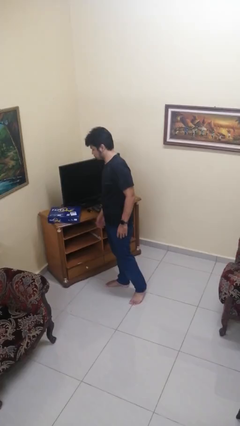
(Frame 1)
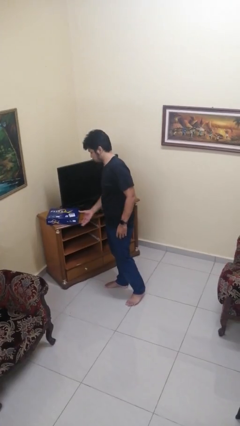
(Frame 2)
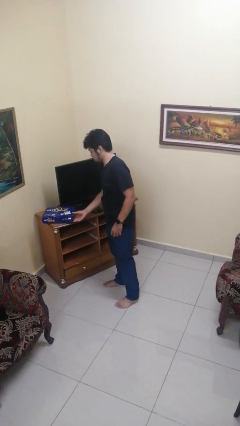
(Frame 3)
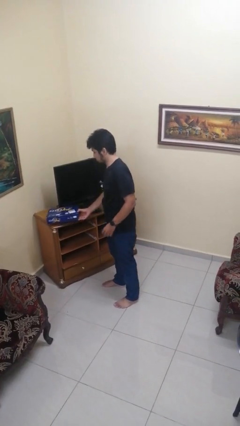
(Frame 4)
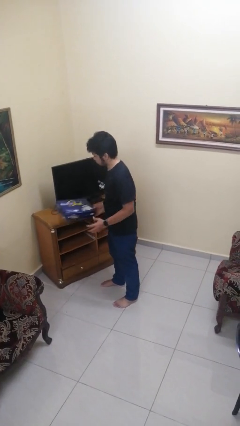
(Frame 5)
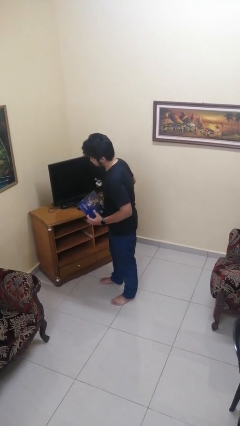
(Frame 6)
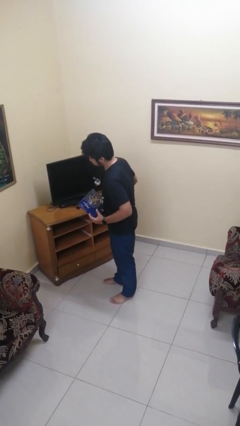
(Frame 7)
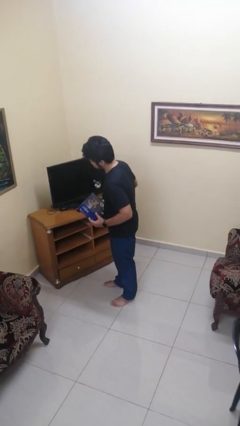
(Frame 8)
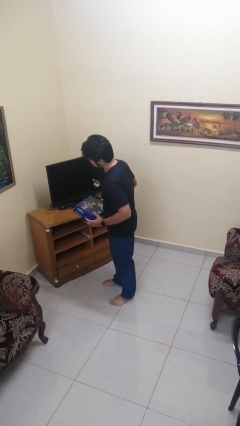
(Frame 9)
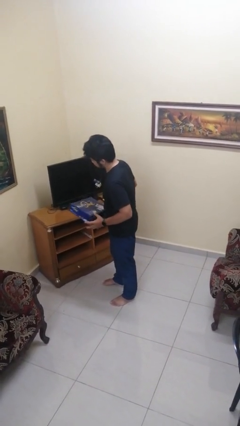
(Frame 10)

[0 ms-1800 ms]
person picks up object from countertop

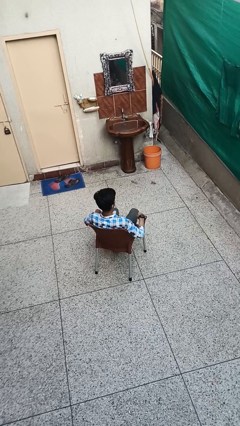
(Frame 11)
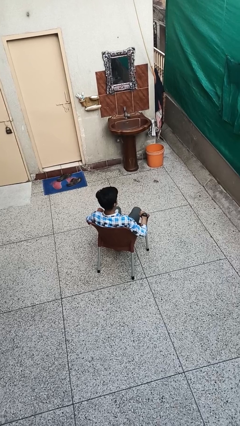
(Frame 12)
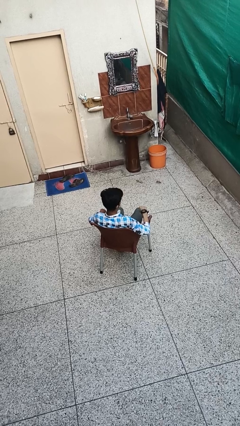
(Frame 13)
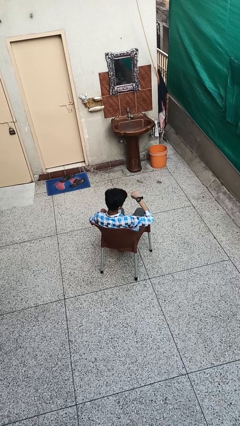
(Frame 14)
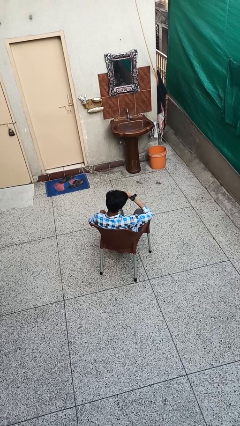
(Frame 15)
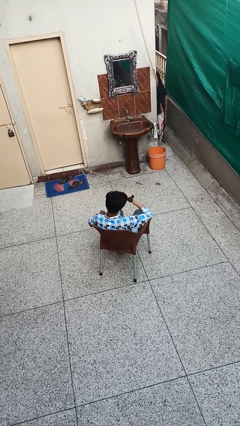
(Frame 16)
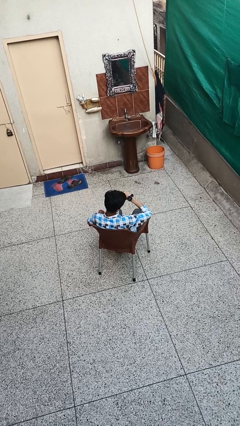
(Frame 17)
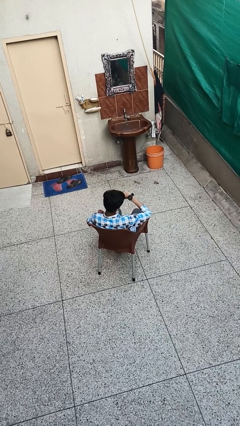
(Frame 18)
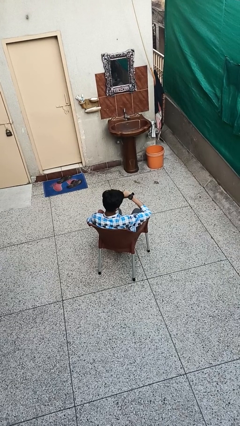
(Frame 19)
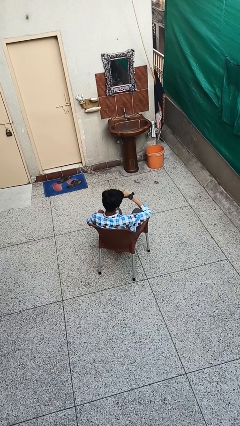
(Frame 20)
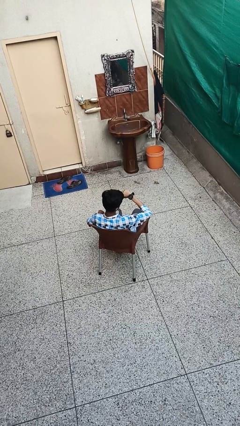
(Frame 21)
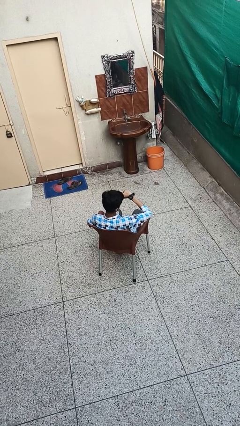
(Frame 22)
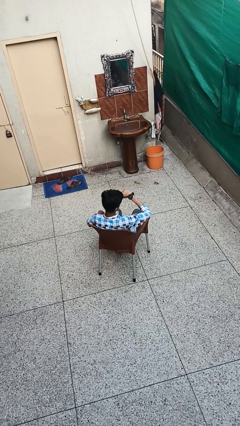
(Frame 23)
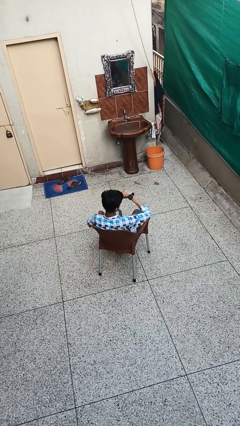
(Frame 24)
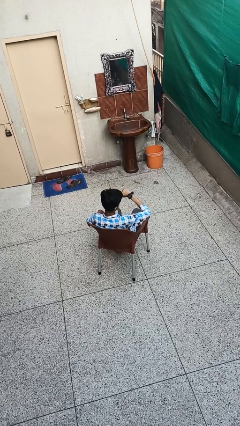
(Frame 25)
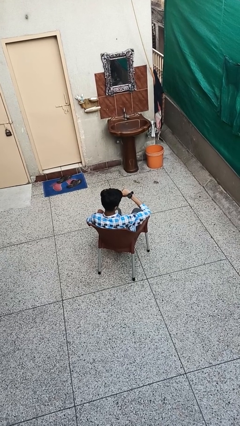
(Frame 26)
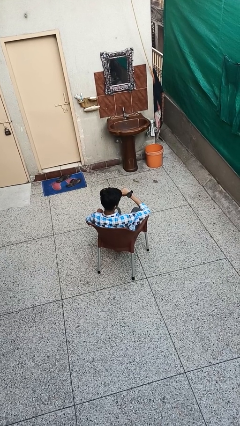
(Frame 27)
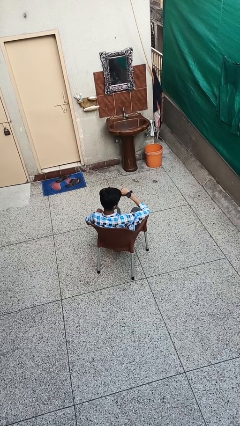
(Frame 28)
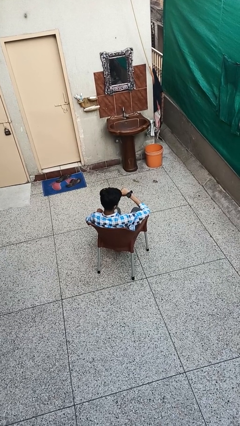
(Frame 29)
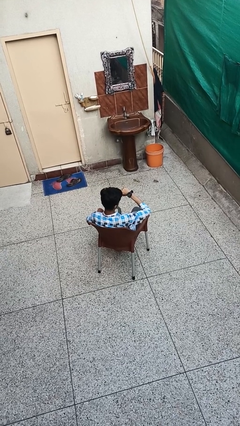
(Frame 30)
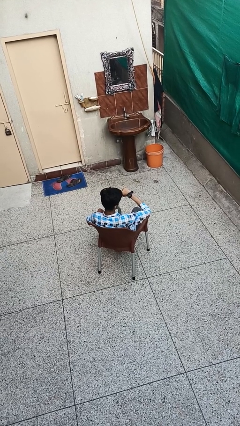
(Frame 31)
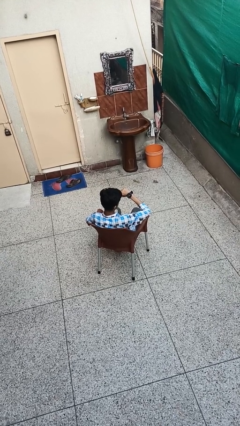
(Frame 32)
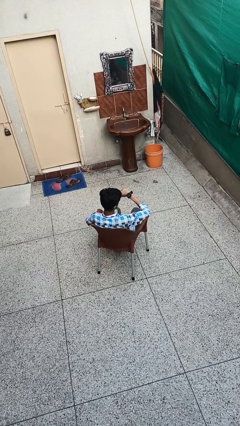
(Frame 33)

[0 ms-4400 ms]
person looks at wristwatch

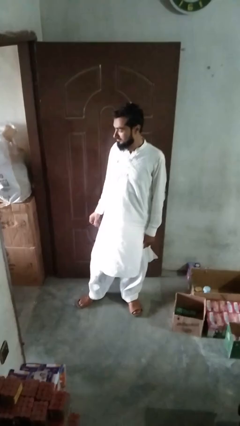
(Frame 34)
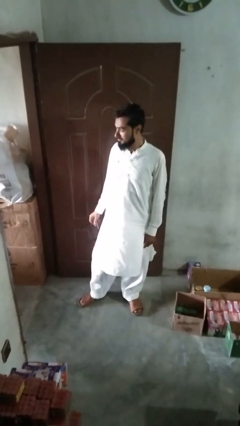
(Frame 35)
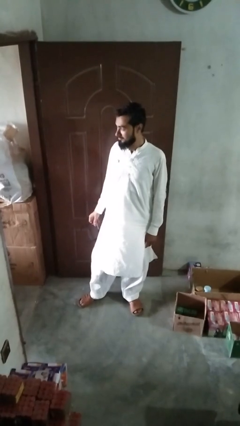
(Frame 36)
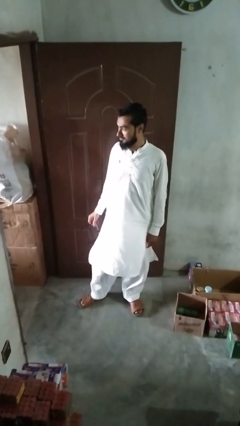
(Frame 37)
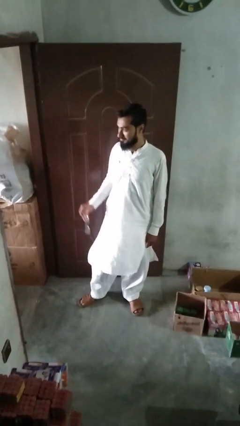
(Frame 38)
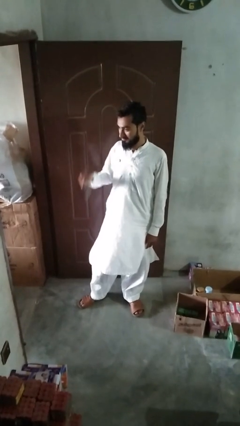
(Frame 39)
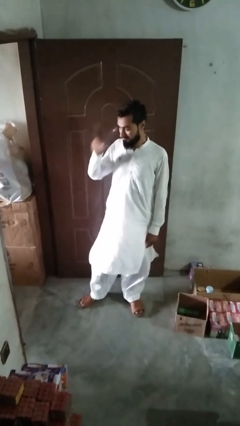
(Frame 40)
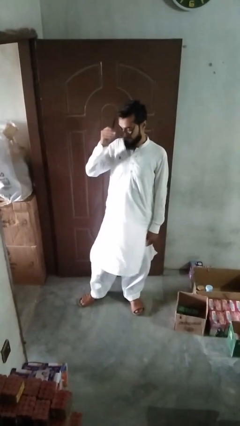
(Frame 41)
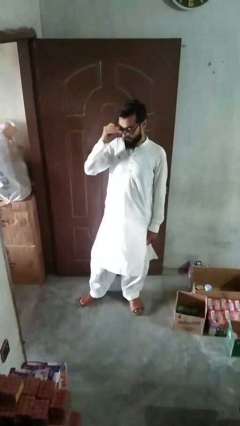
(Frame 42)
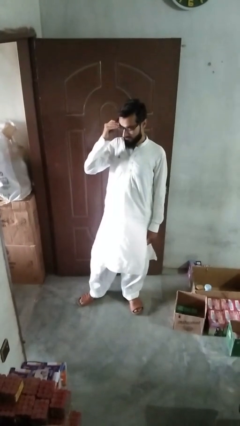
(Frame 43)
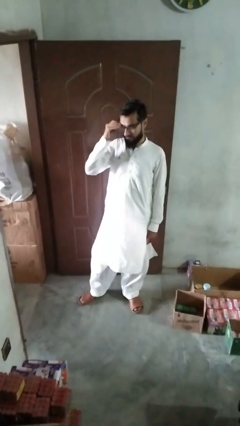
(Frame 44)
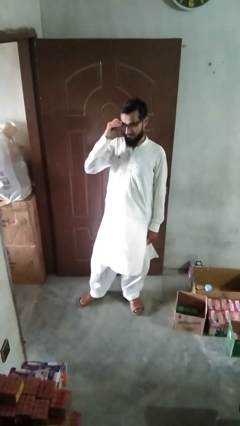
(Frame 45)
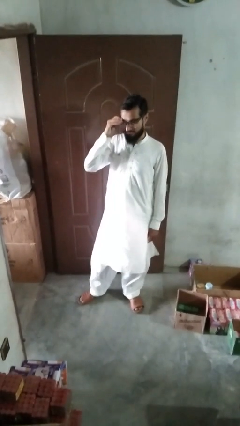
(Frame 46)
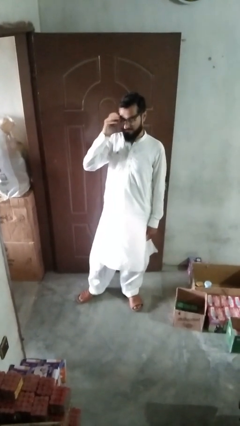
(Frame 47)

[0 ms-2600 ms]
person puts on glasses

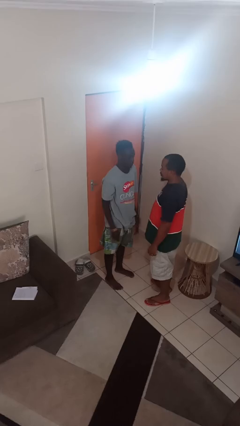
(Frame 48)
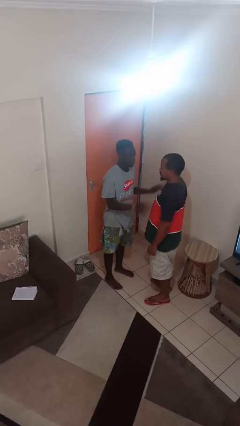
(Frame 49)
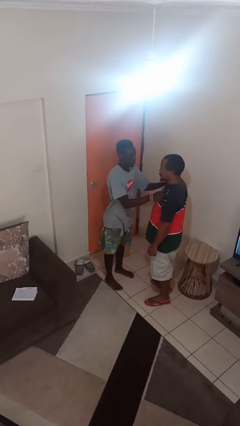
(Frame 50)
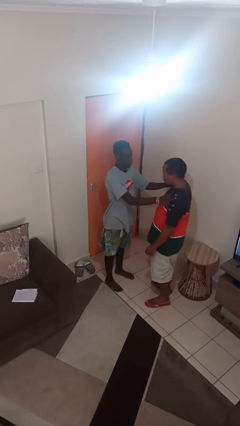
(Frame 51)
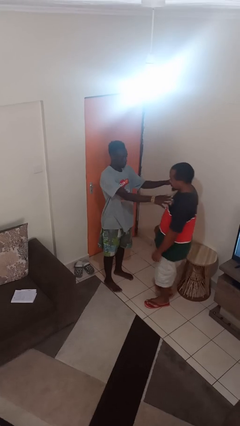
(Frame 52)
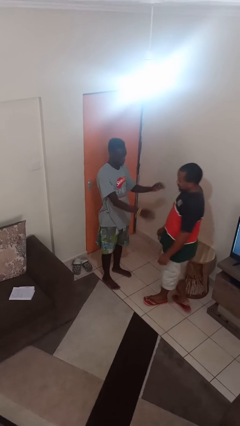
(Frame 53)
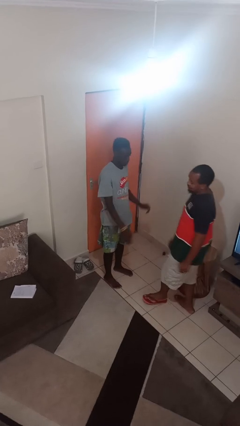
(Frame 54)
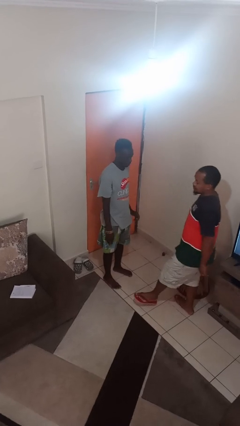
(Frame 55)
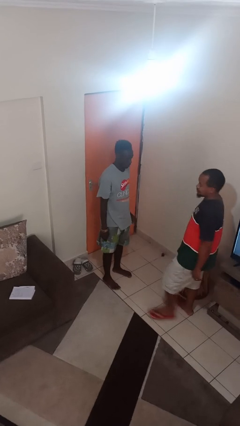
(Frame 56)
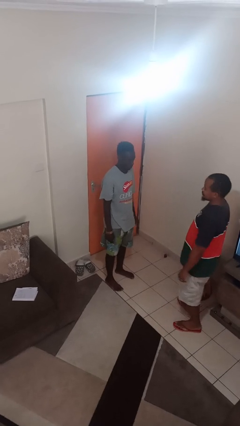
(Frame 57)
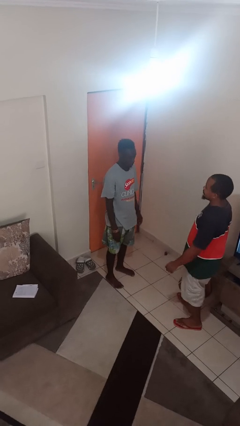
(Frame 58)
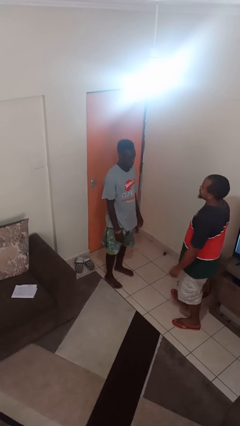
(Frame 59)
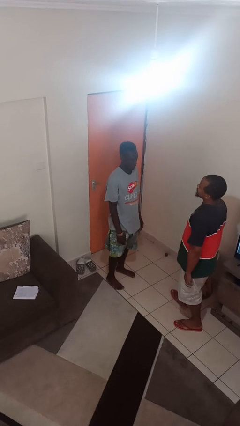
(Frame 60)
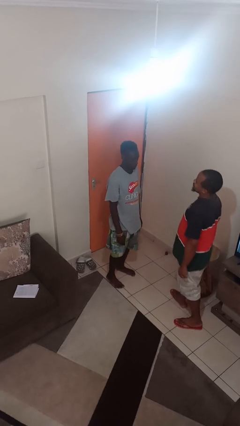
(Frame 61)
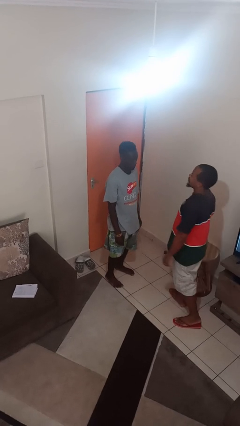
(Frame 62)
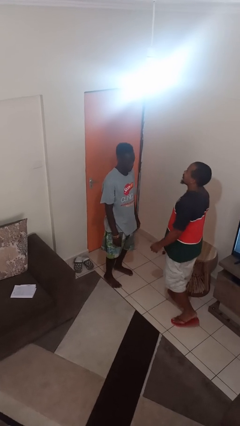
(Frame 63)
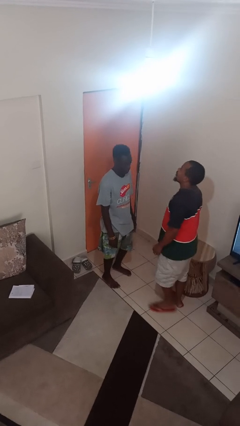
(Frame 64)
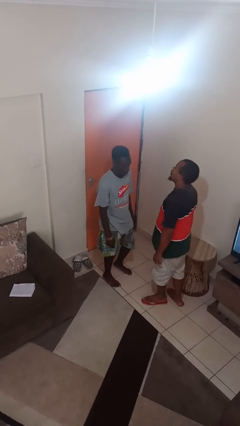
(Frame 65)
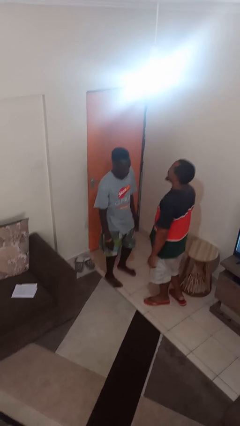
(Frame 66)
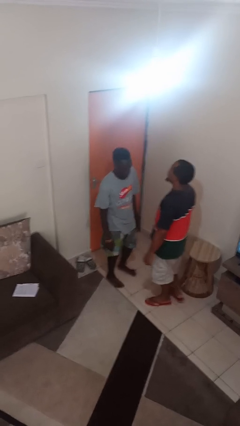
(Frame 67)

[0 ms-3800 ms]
person shoves person

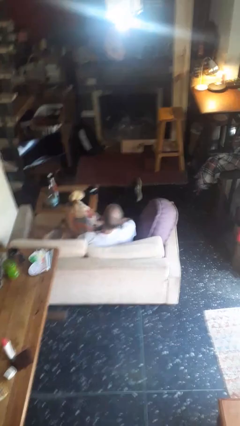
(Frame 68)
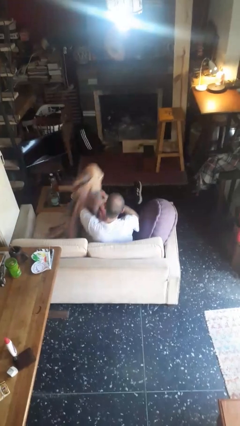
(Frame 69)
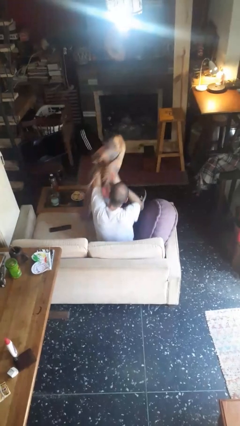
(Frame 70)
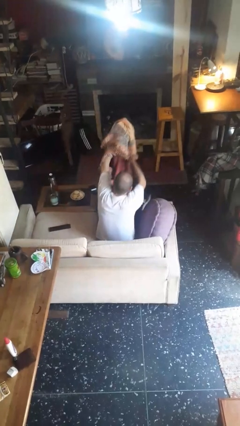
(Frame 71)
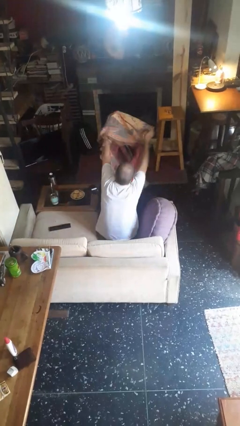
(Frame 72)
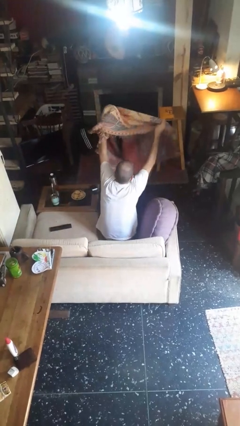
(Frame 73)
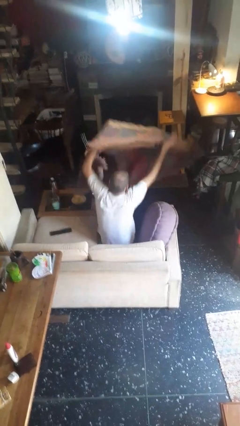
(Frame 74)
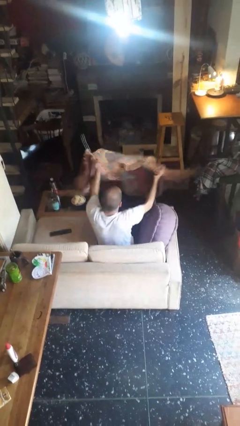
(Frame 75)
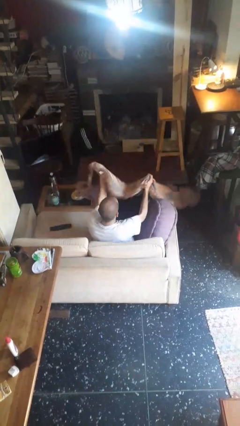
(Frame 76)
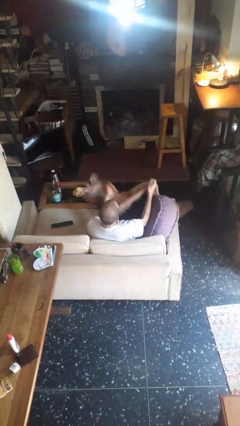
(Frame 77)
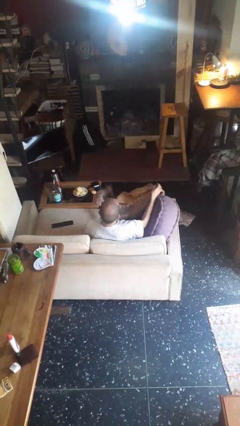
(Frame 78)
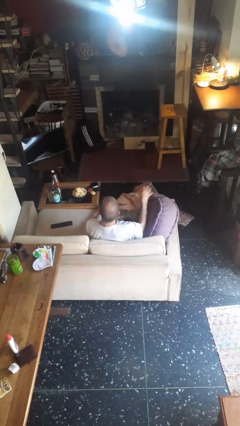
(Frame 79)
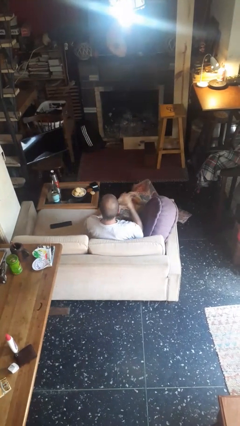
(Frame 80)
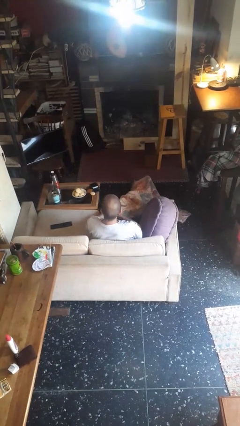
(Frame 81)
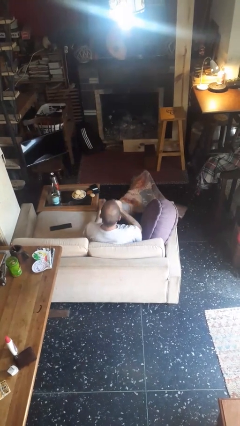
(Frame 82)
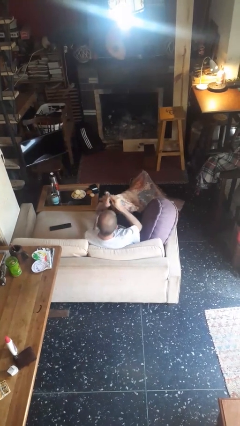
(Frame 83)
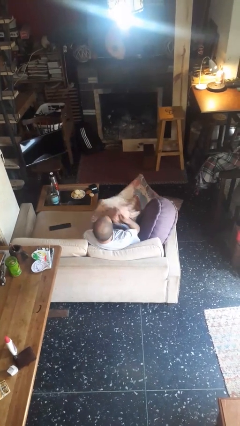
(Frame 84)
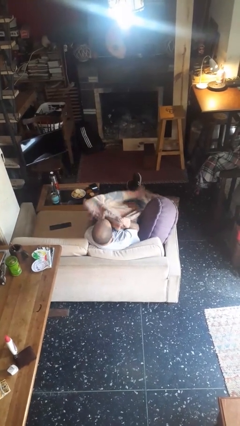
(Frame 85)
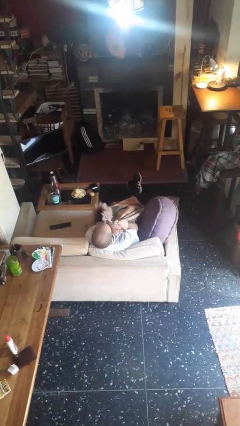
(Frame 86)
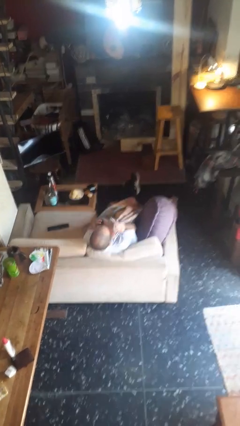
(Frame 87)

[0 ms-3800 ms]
person covers with blanket

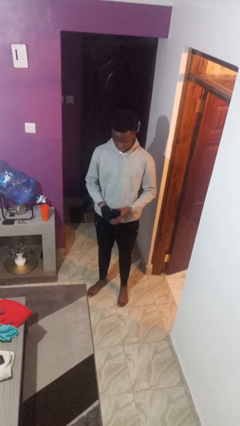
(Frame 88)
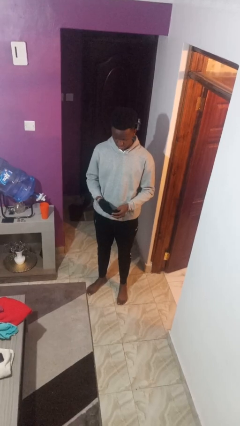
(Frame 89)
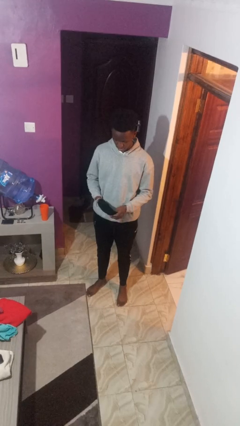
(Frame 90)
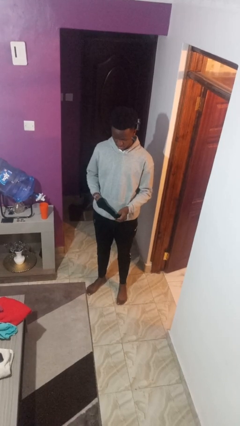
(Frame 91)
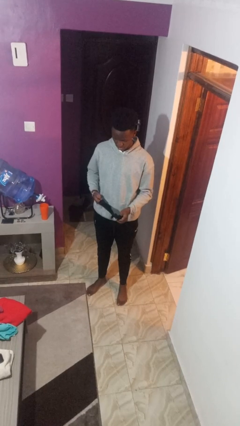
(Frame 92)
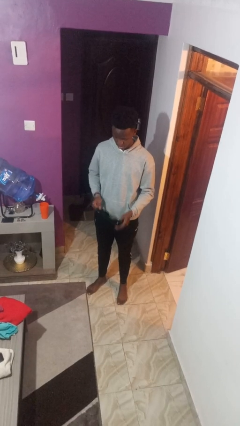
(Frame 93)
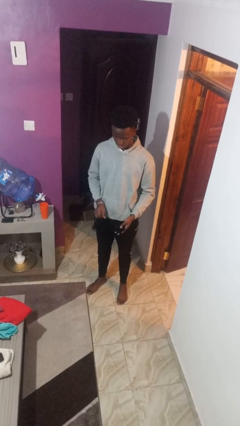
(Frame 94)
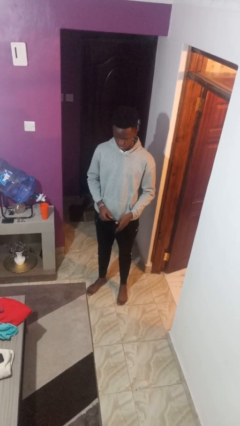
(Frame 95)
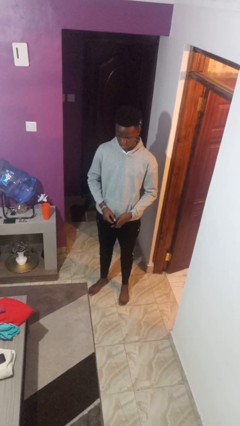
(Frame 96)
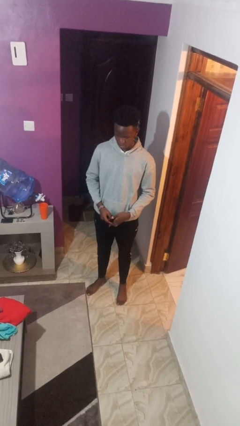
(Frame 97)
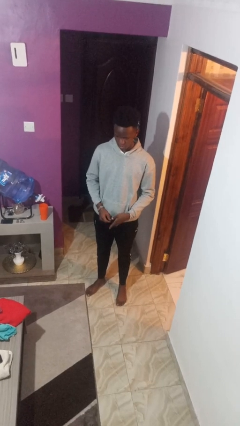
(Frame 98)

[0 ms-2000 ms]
person takes off gloves
